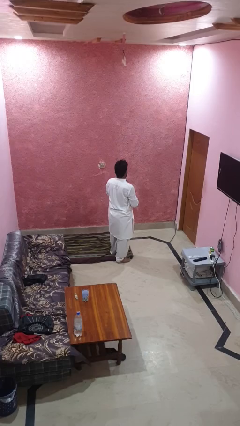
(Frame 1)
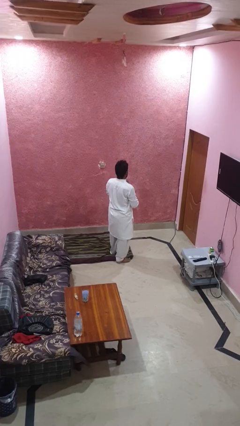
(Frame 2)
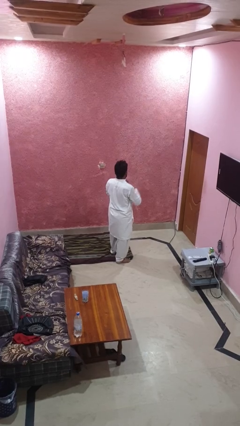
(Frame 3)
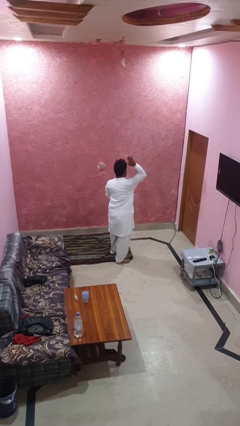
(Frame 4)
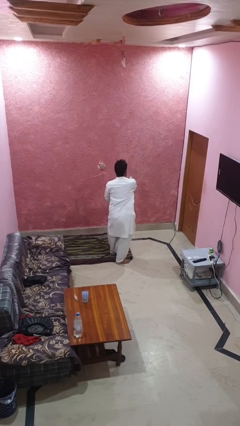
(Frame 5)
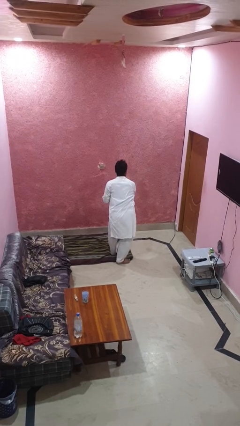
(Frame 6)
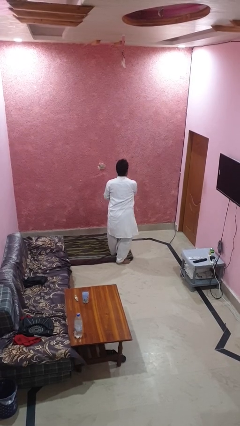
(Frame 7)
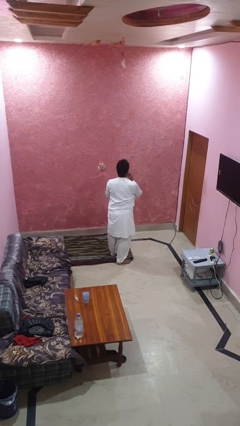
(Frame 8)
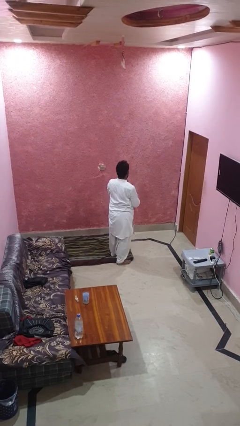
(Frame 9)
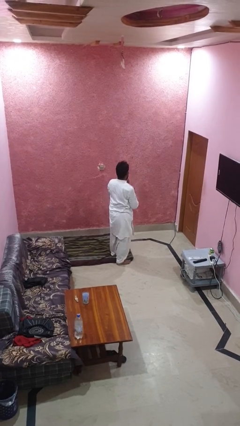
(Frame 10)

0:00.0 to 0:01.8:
person karate chop

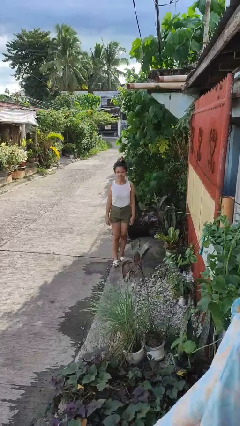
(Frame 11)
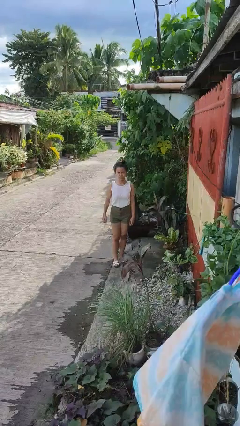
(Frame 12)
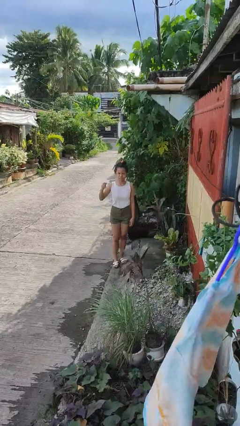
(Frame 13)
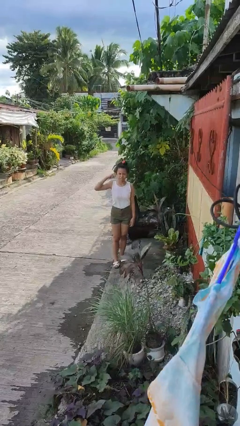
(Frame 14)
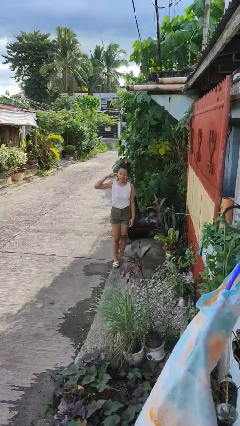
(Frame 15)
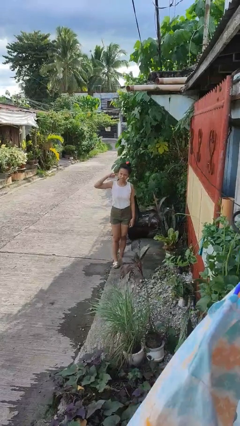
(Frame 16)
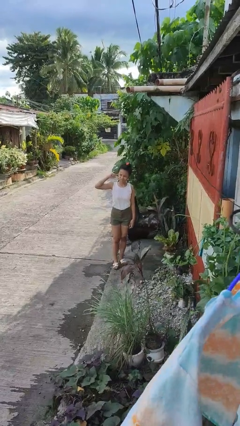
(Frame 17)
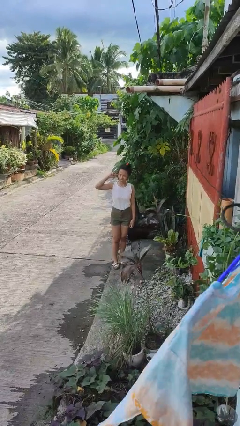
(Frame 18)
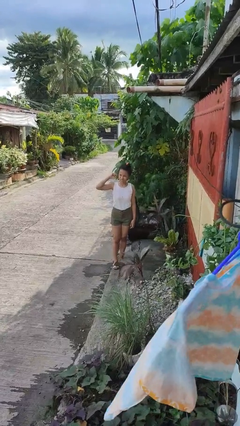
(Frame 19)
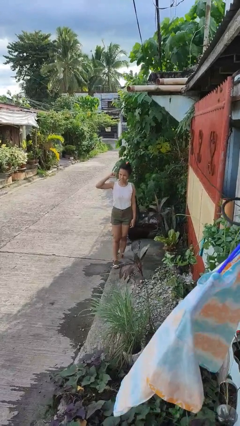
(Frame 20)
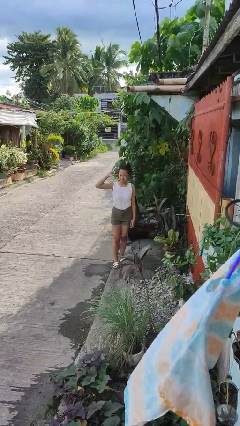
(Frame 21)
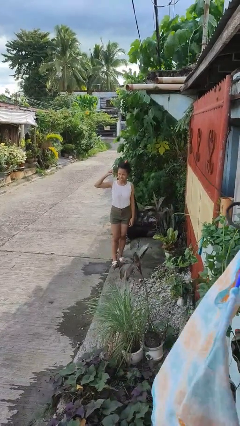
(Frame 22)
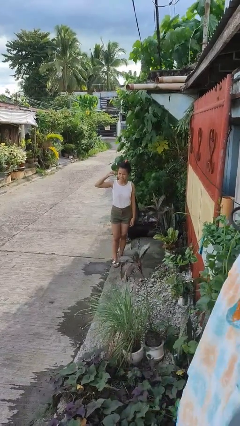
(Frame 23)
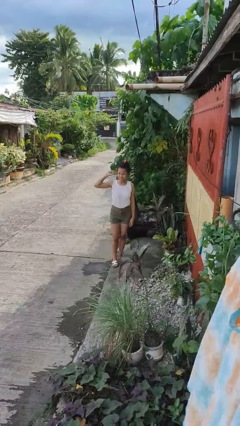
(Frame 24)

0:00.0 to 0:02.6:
person touches earlobe

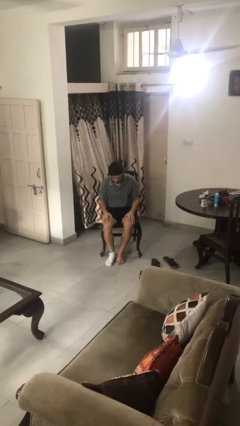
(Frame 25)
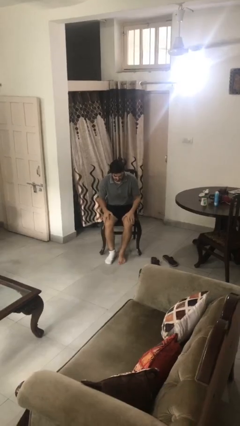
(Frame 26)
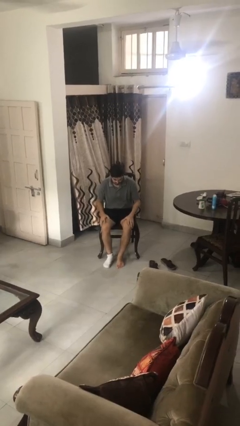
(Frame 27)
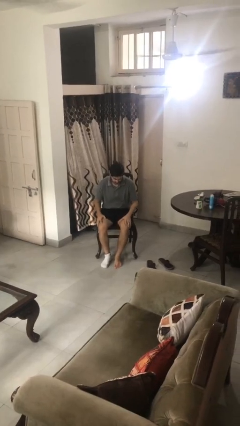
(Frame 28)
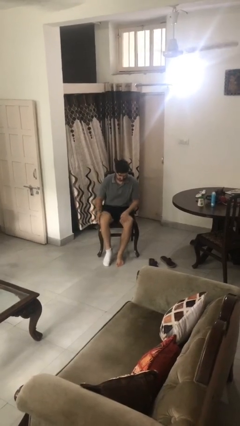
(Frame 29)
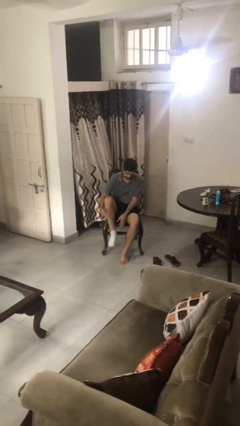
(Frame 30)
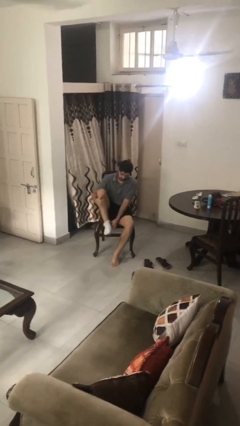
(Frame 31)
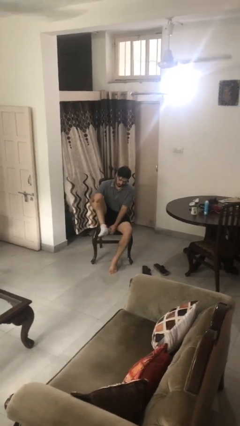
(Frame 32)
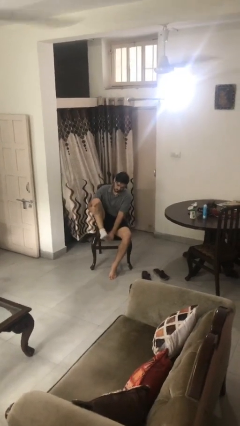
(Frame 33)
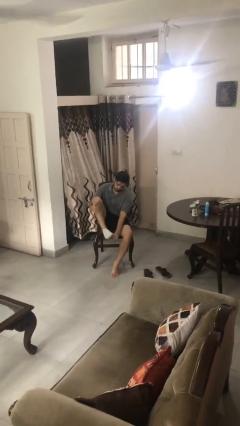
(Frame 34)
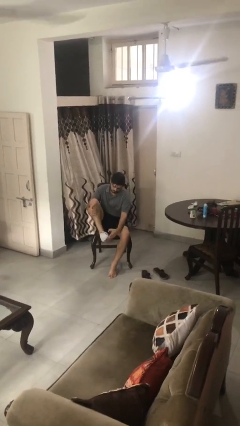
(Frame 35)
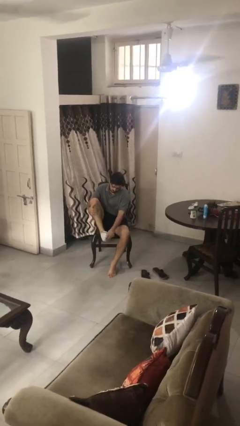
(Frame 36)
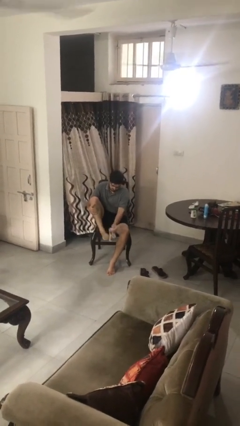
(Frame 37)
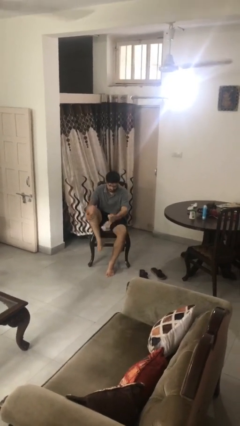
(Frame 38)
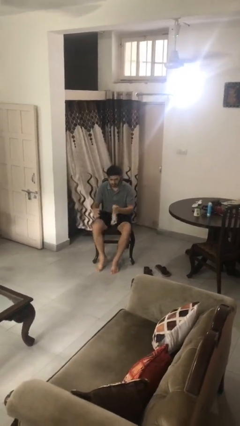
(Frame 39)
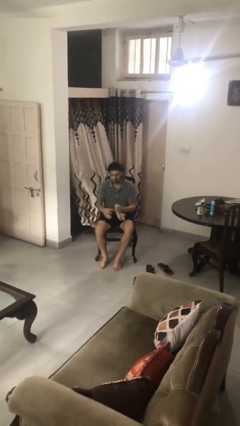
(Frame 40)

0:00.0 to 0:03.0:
person takes off socks

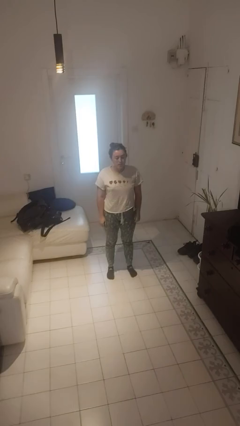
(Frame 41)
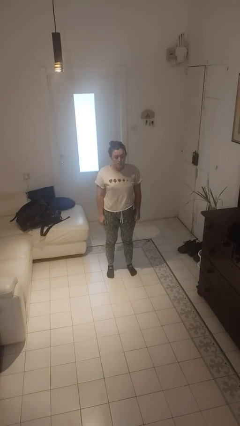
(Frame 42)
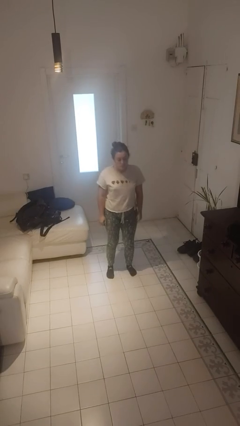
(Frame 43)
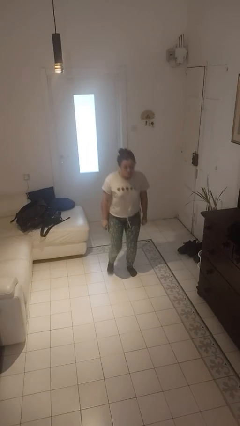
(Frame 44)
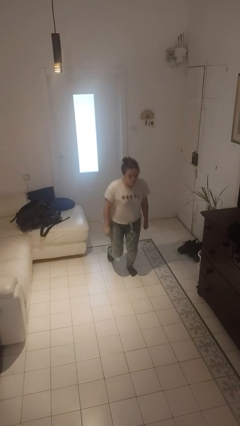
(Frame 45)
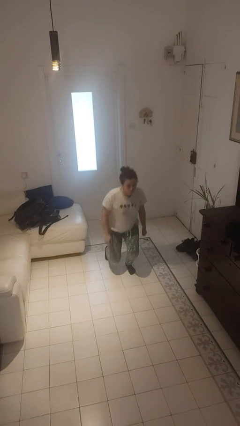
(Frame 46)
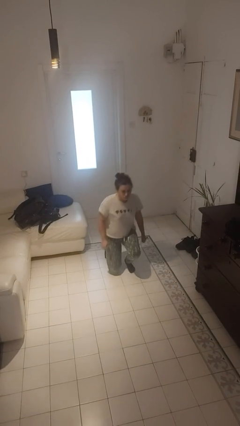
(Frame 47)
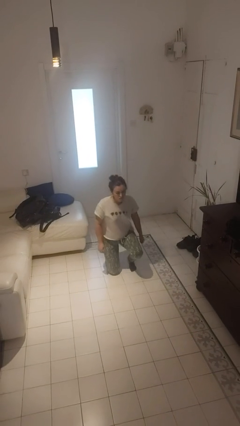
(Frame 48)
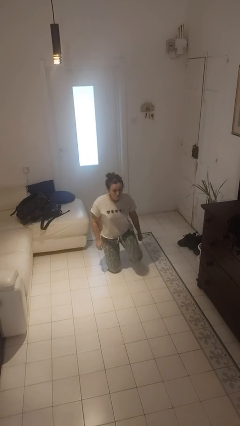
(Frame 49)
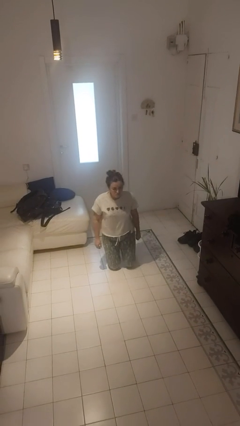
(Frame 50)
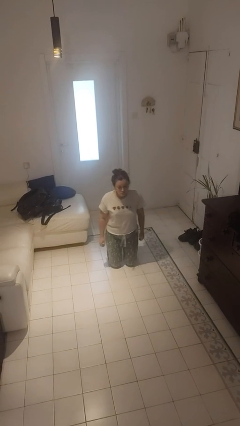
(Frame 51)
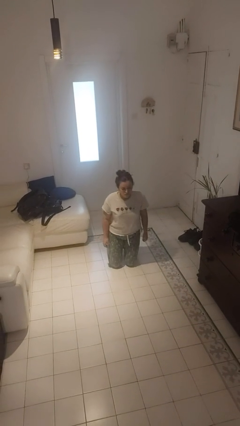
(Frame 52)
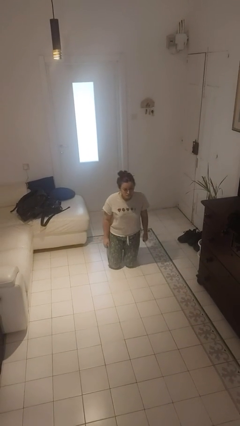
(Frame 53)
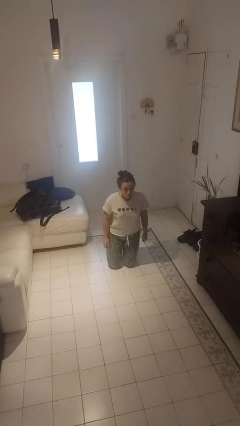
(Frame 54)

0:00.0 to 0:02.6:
person kneels

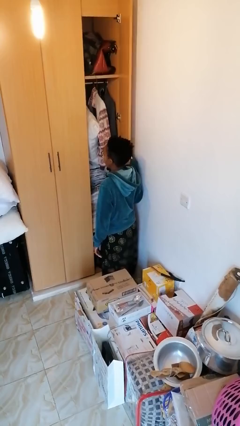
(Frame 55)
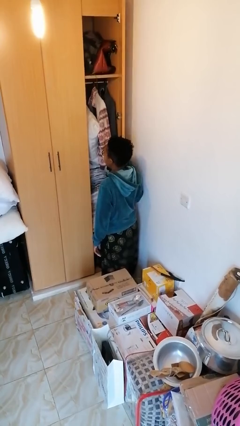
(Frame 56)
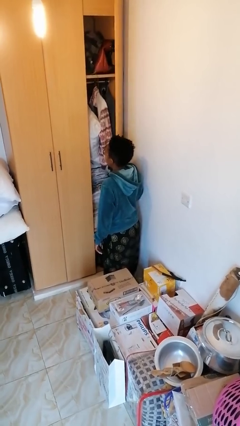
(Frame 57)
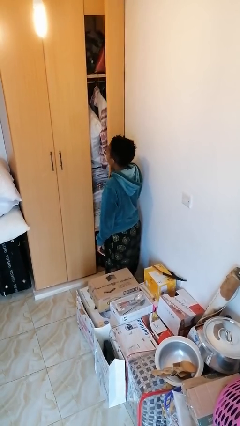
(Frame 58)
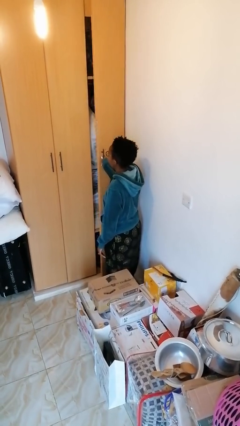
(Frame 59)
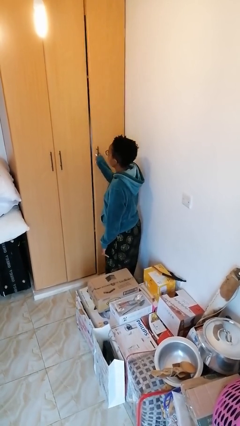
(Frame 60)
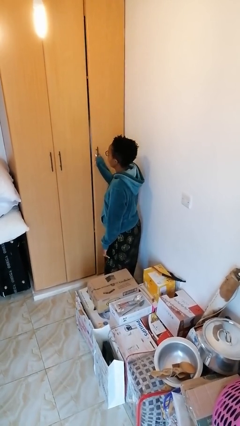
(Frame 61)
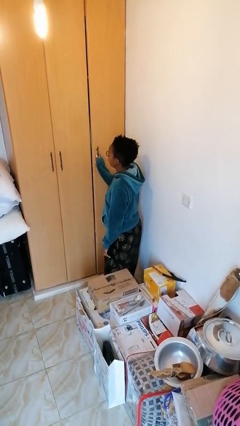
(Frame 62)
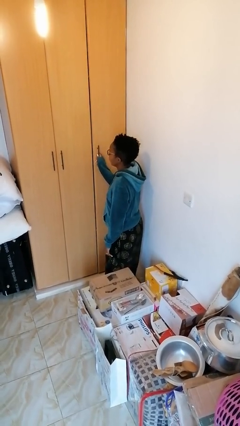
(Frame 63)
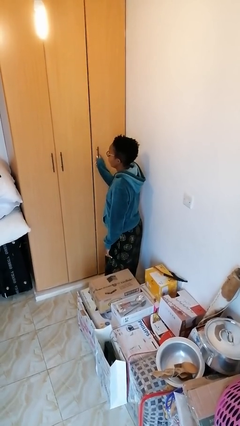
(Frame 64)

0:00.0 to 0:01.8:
person closes closet door

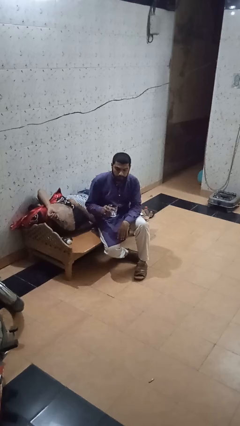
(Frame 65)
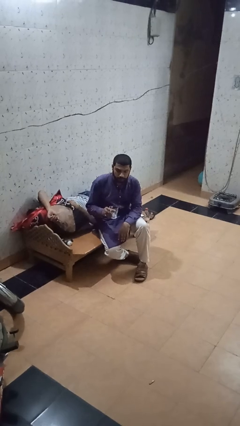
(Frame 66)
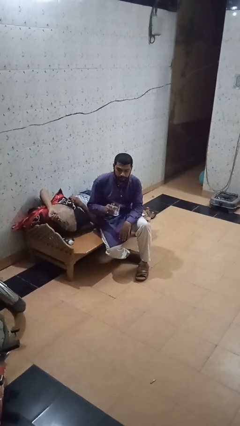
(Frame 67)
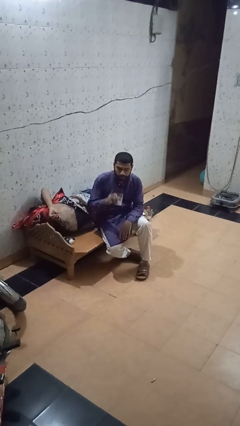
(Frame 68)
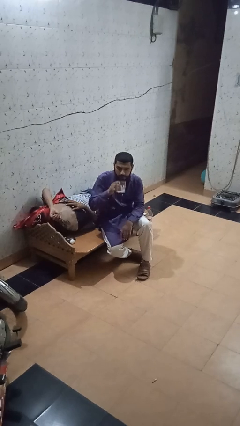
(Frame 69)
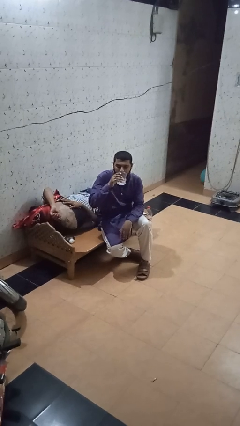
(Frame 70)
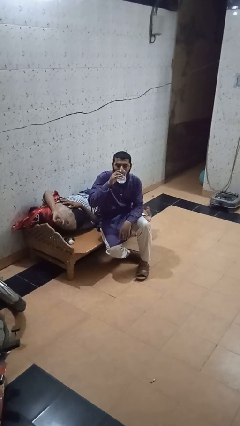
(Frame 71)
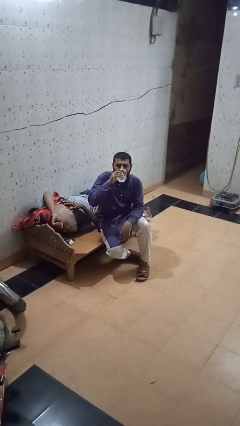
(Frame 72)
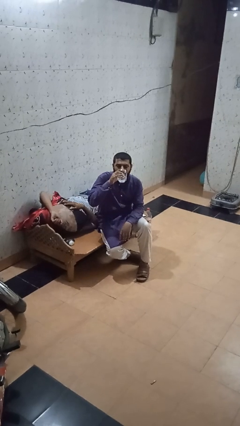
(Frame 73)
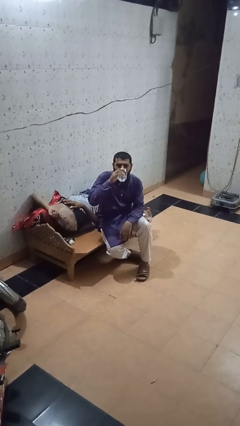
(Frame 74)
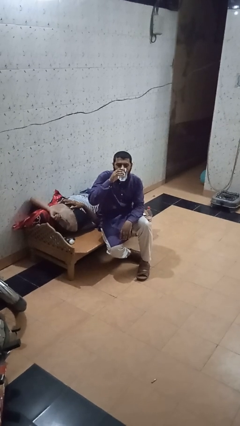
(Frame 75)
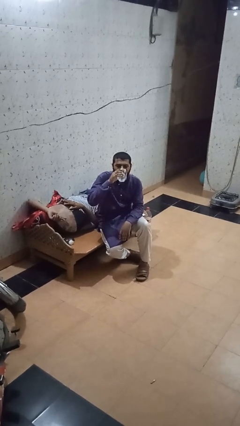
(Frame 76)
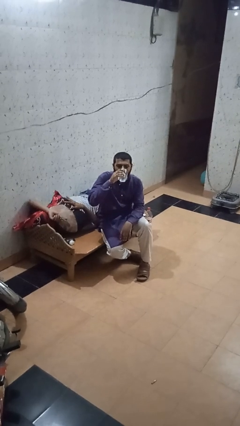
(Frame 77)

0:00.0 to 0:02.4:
person drinks from mug

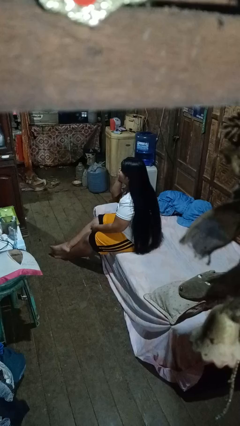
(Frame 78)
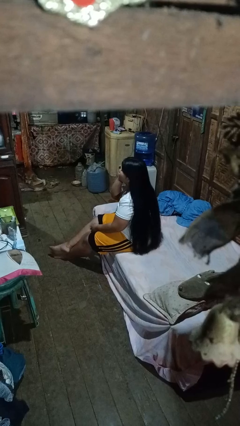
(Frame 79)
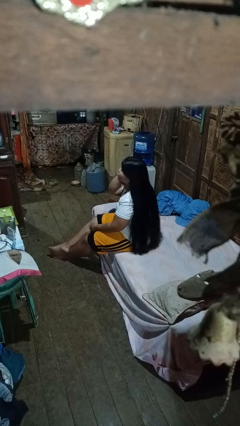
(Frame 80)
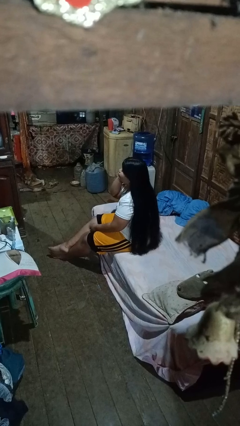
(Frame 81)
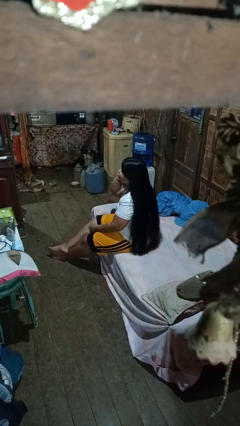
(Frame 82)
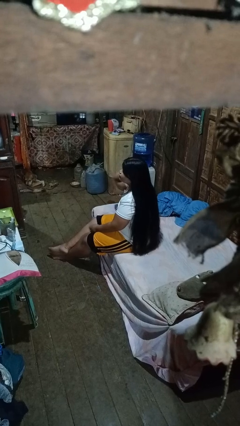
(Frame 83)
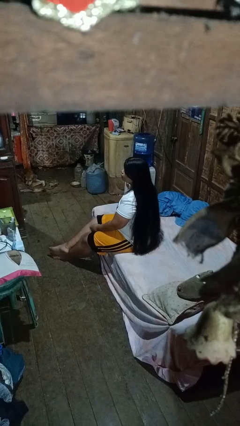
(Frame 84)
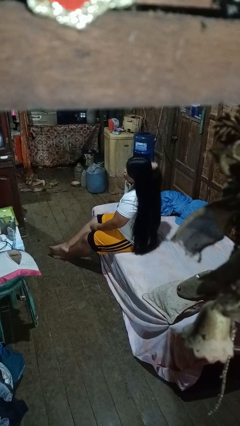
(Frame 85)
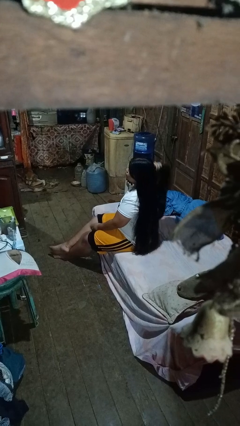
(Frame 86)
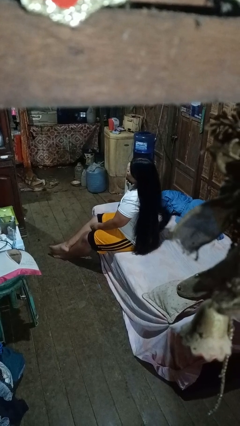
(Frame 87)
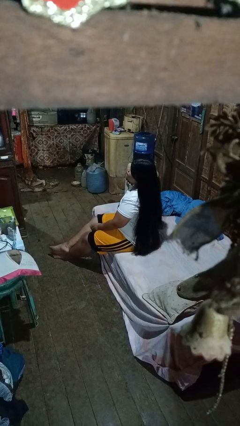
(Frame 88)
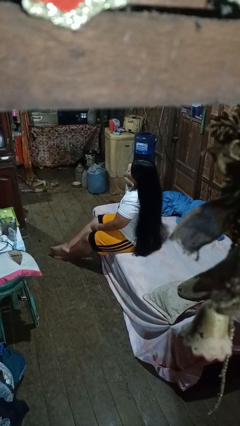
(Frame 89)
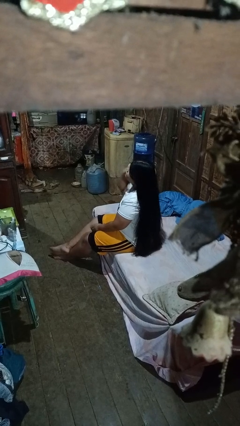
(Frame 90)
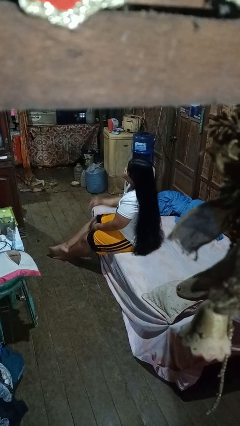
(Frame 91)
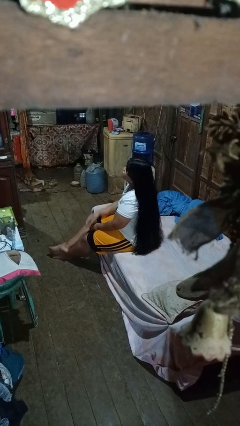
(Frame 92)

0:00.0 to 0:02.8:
person strokes hair
